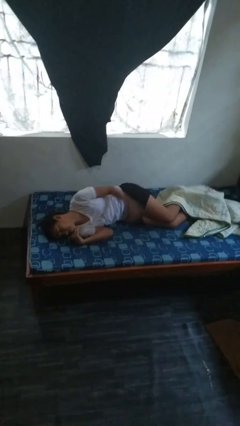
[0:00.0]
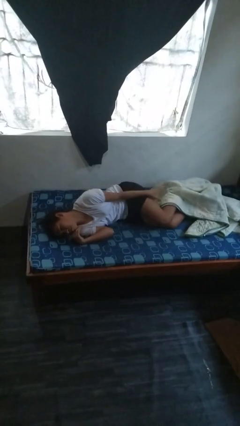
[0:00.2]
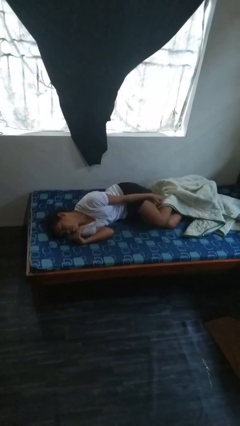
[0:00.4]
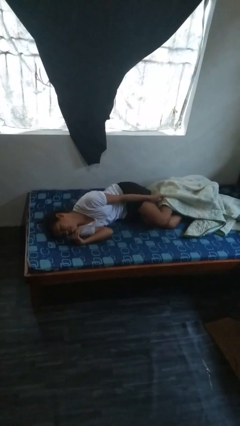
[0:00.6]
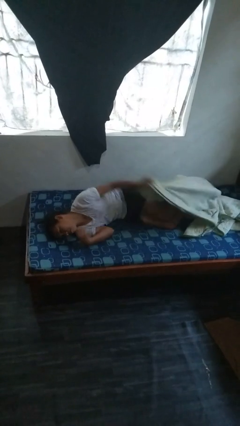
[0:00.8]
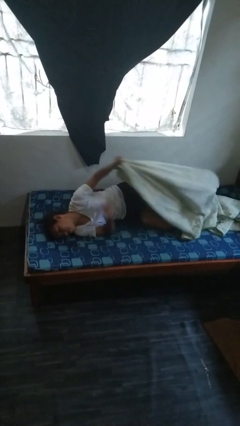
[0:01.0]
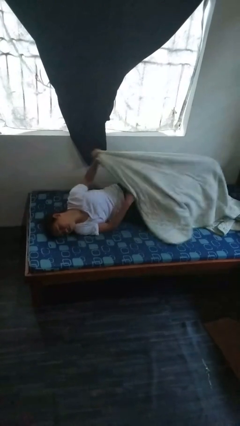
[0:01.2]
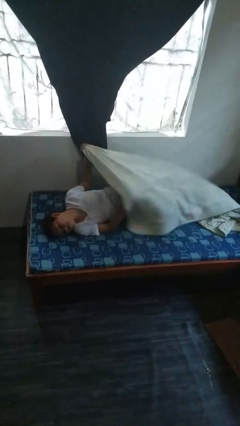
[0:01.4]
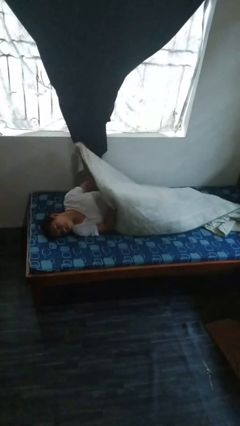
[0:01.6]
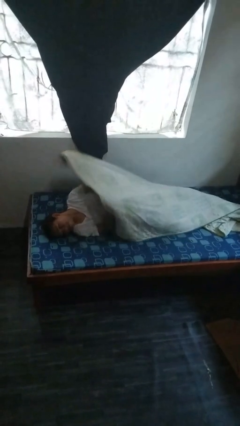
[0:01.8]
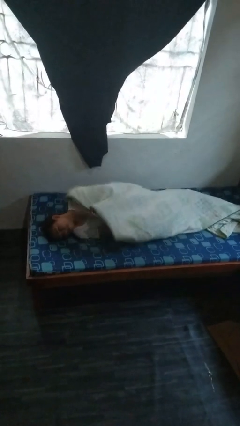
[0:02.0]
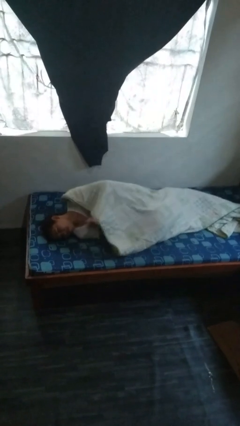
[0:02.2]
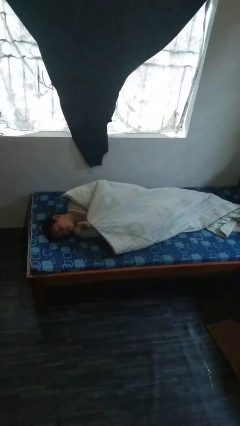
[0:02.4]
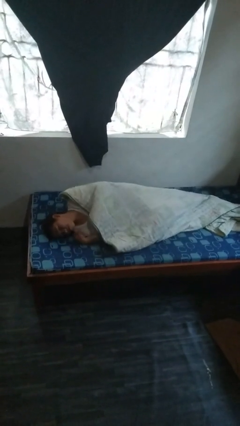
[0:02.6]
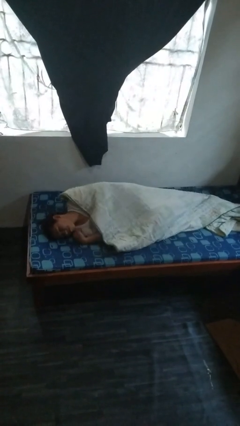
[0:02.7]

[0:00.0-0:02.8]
person covers with bedsheets

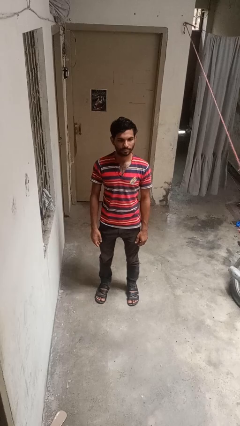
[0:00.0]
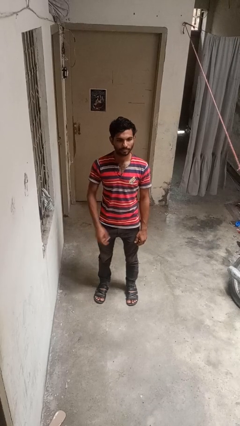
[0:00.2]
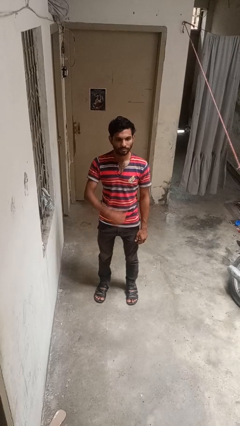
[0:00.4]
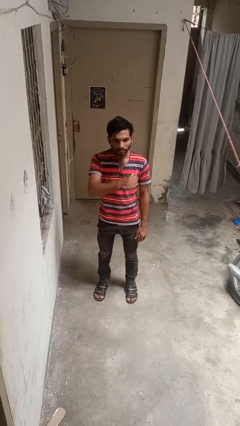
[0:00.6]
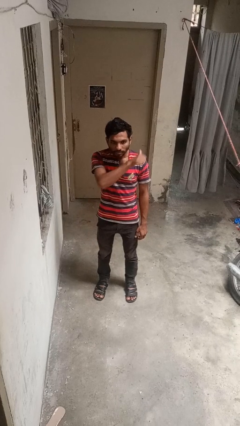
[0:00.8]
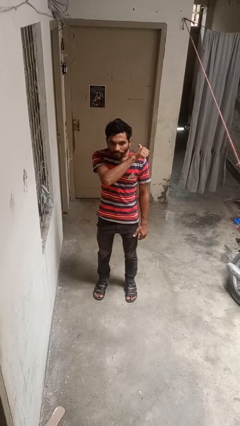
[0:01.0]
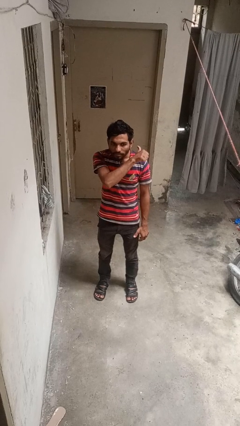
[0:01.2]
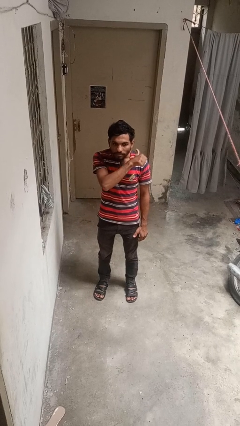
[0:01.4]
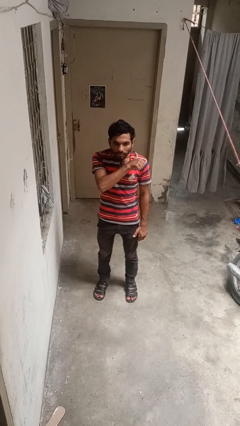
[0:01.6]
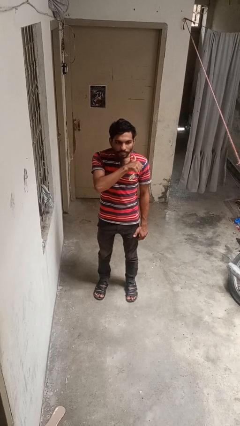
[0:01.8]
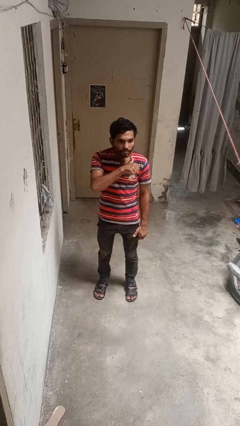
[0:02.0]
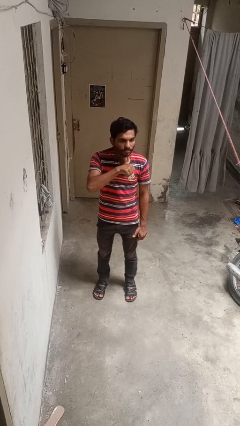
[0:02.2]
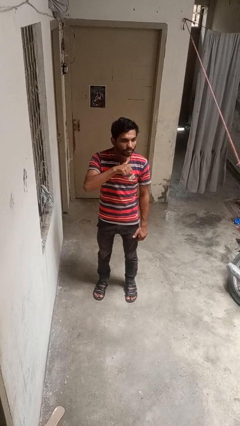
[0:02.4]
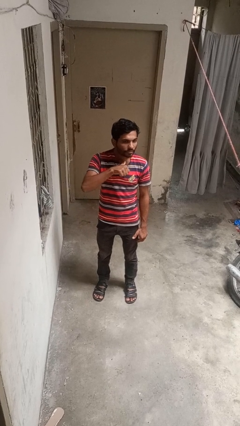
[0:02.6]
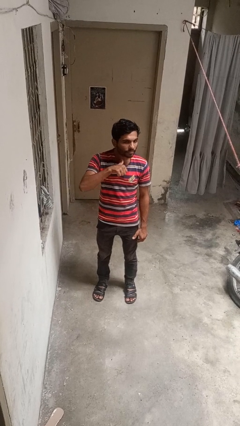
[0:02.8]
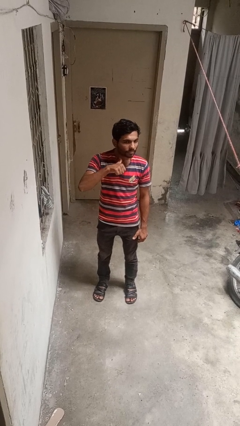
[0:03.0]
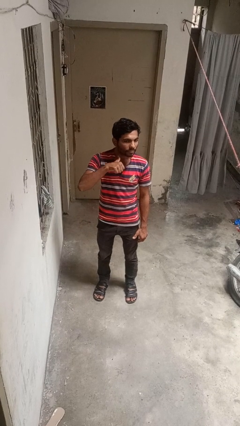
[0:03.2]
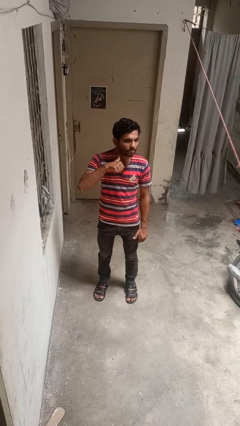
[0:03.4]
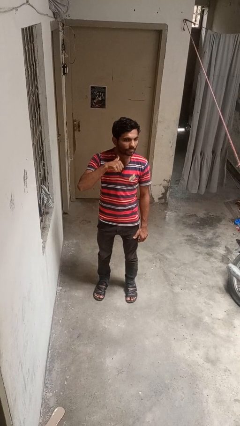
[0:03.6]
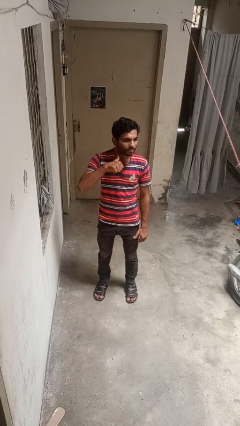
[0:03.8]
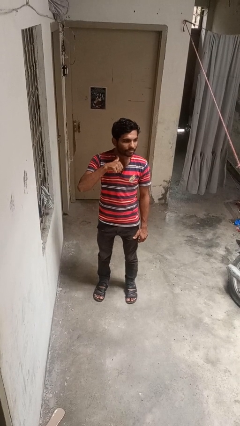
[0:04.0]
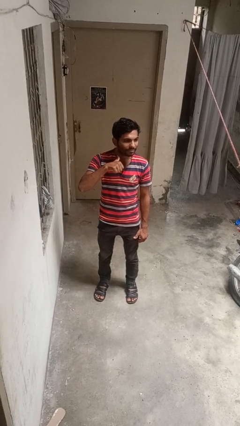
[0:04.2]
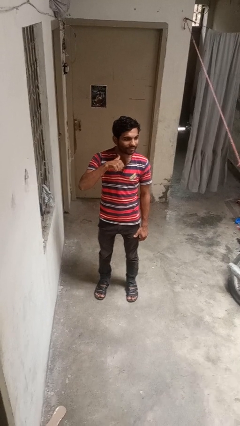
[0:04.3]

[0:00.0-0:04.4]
person gestures cut

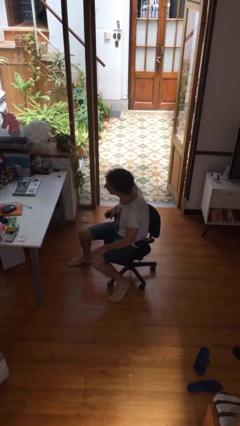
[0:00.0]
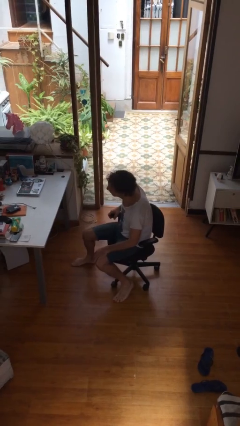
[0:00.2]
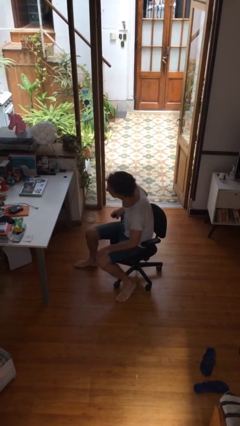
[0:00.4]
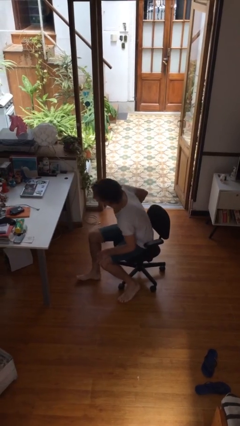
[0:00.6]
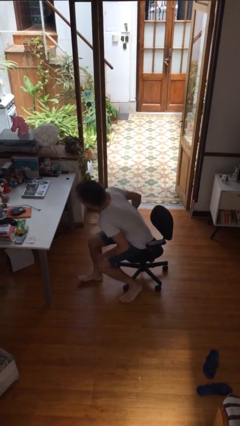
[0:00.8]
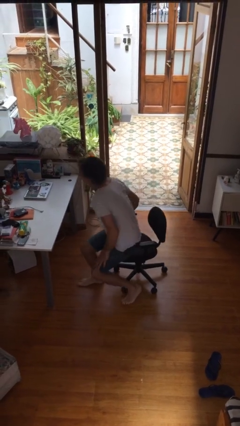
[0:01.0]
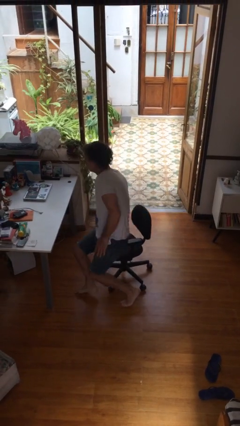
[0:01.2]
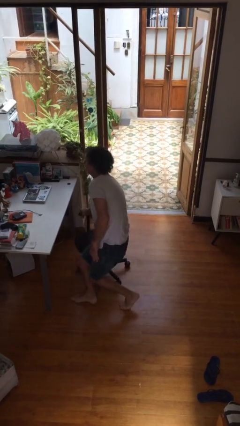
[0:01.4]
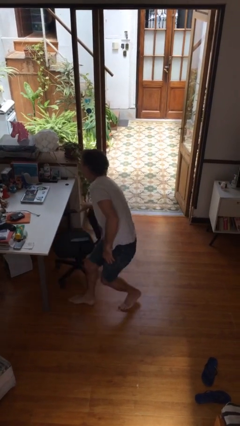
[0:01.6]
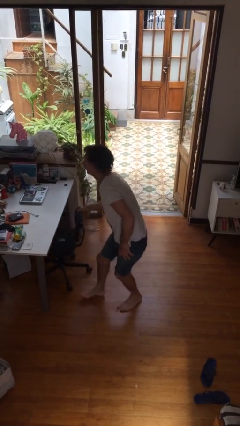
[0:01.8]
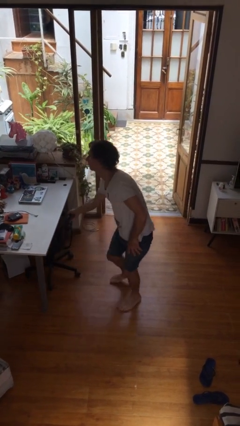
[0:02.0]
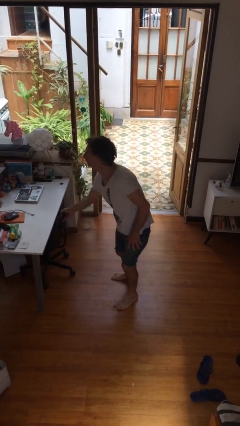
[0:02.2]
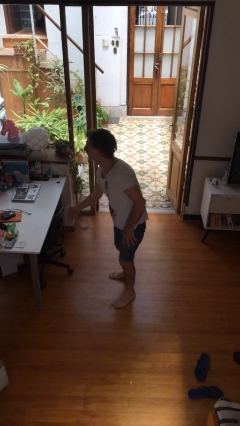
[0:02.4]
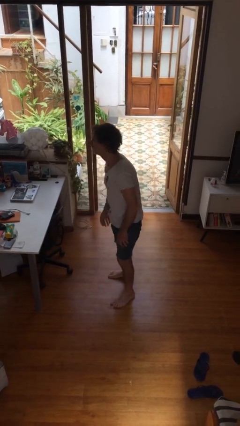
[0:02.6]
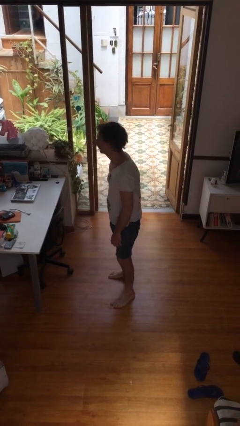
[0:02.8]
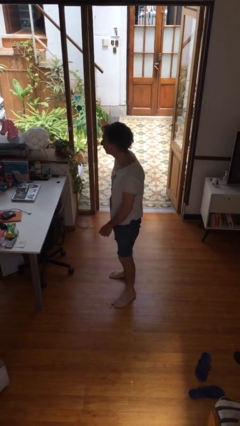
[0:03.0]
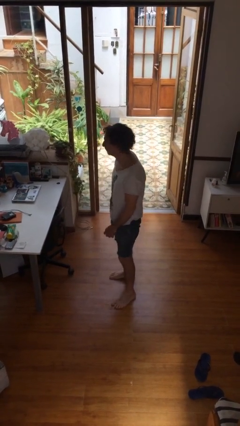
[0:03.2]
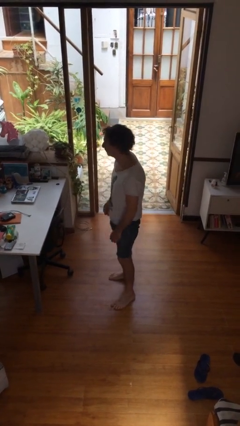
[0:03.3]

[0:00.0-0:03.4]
person stands up

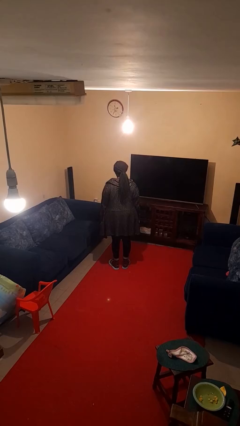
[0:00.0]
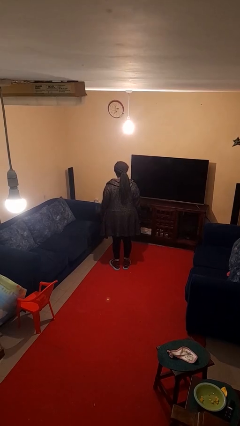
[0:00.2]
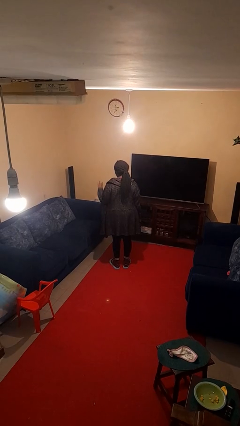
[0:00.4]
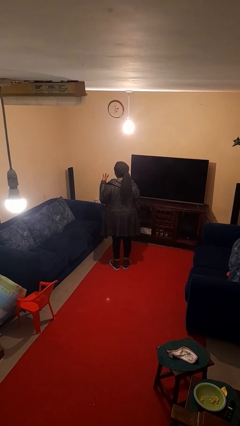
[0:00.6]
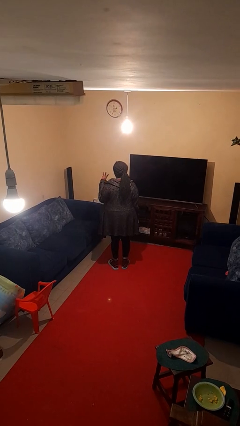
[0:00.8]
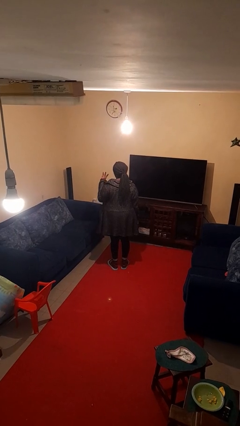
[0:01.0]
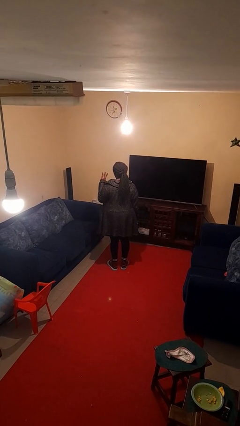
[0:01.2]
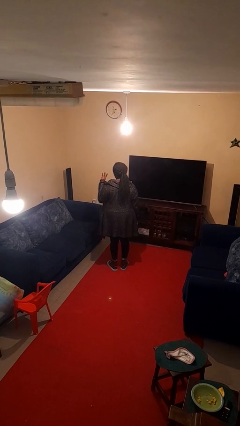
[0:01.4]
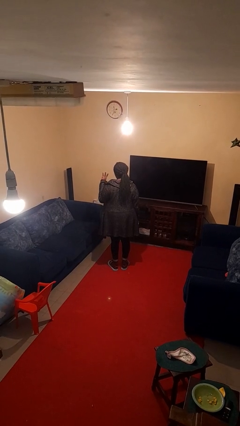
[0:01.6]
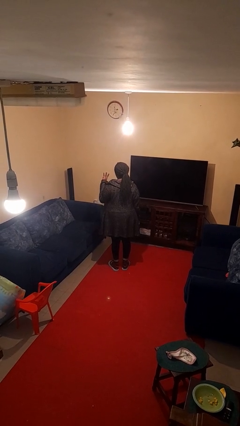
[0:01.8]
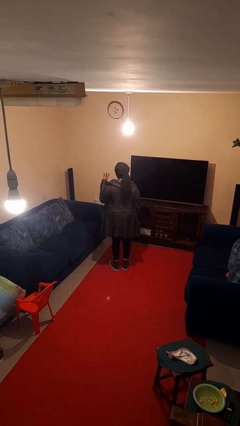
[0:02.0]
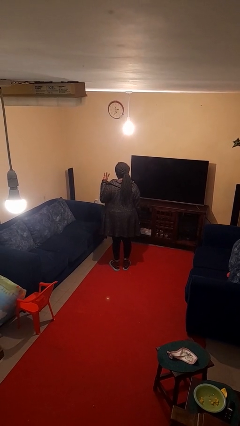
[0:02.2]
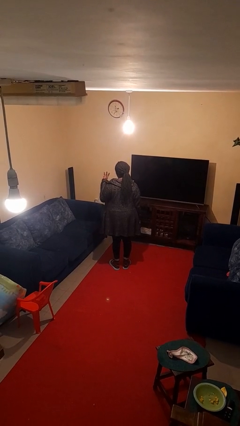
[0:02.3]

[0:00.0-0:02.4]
person gestures number three

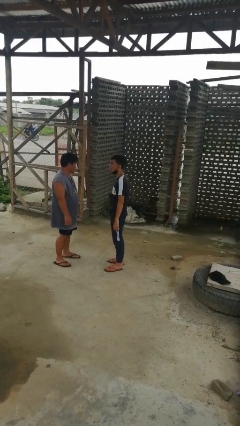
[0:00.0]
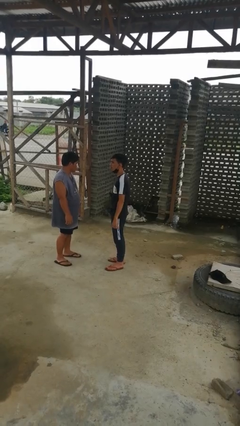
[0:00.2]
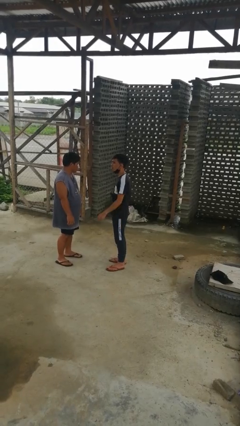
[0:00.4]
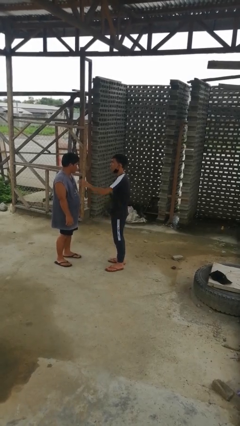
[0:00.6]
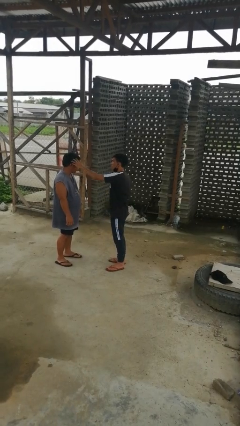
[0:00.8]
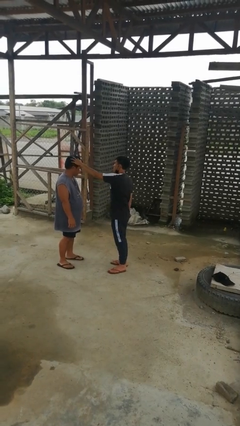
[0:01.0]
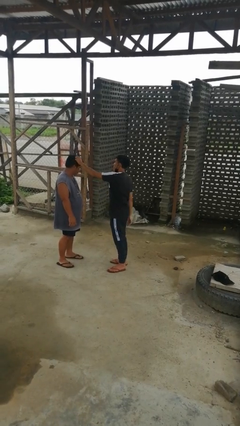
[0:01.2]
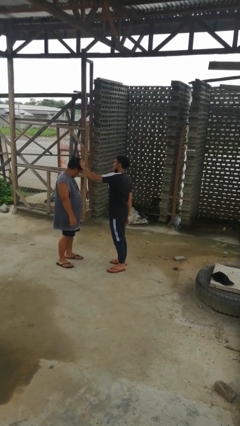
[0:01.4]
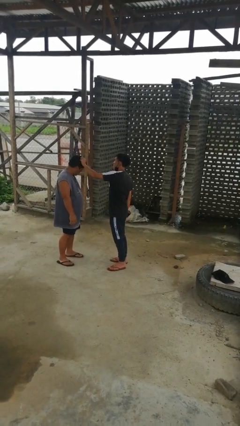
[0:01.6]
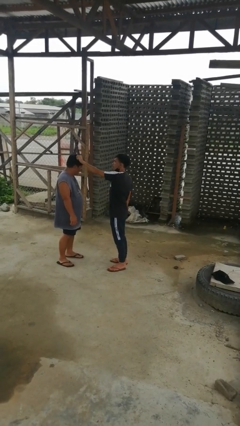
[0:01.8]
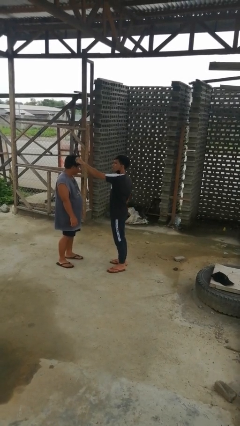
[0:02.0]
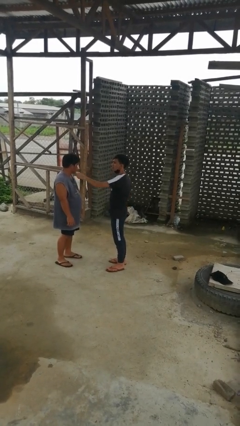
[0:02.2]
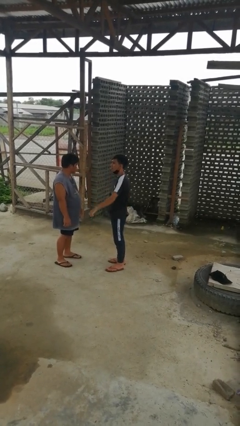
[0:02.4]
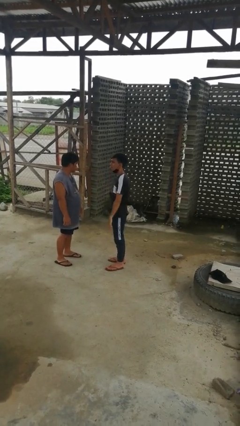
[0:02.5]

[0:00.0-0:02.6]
person grabs person by hair

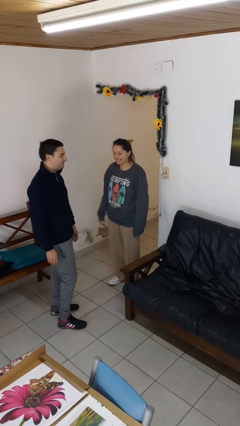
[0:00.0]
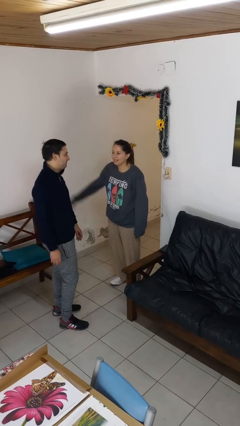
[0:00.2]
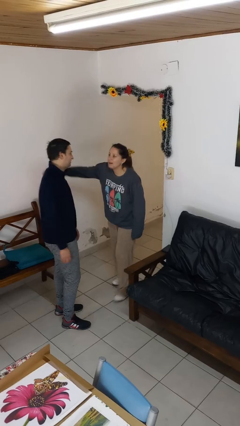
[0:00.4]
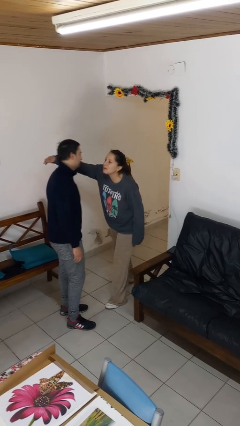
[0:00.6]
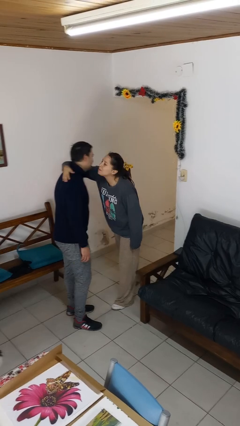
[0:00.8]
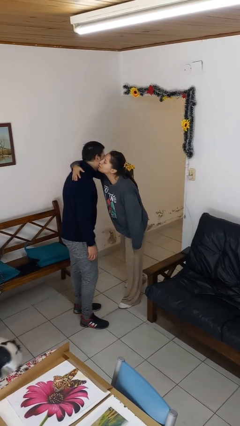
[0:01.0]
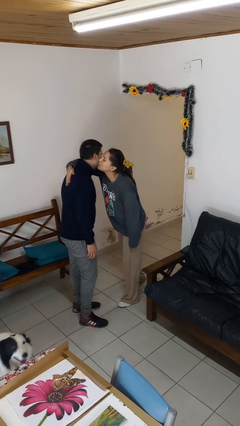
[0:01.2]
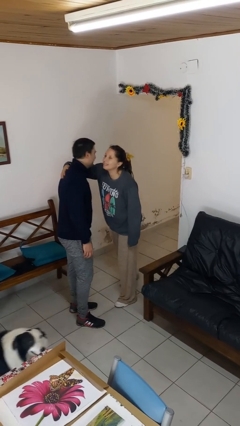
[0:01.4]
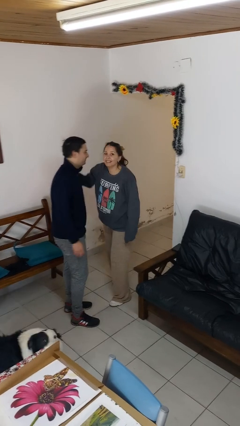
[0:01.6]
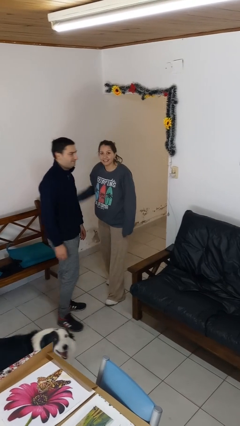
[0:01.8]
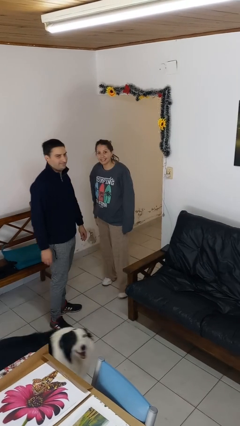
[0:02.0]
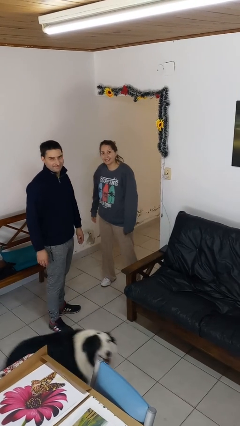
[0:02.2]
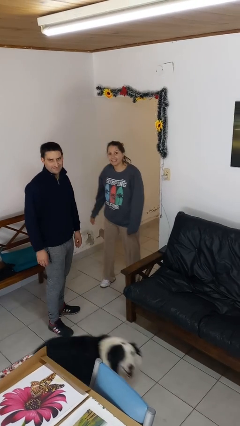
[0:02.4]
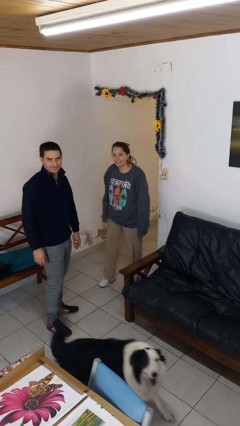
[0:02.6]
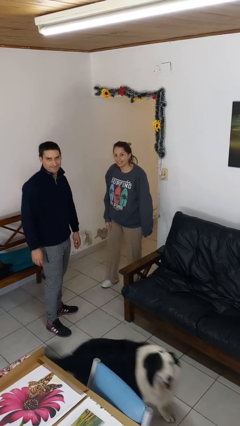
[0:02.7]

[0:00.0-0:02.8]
person kisses cheek of person
